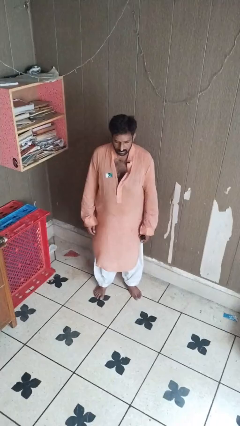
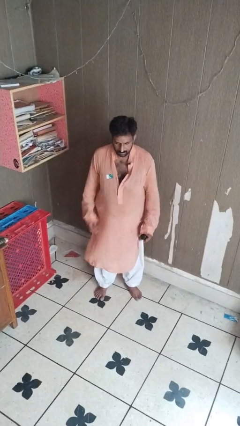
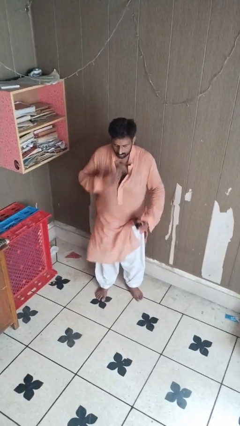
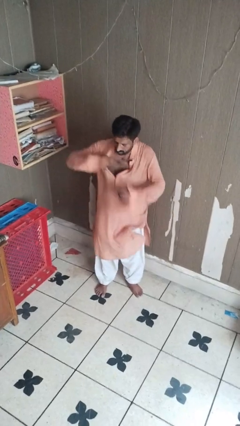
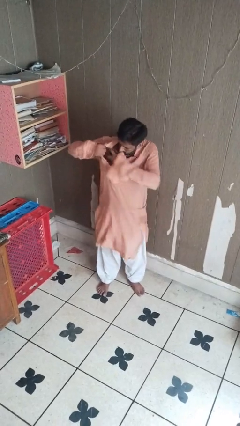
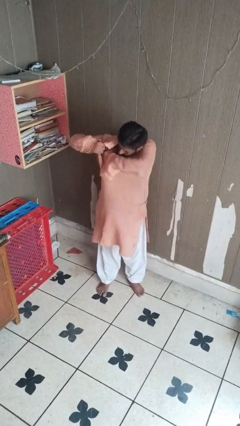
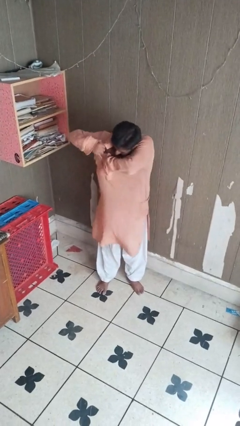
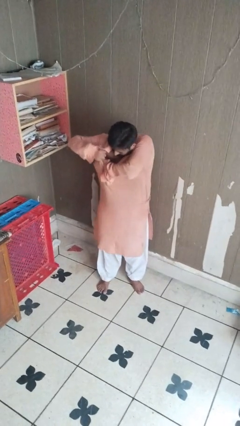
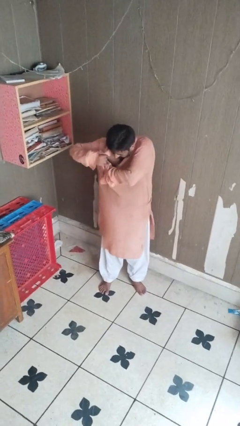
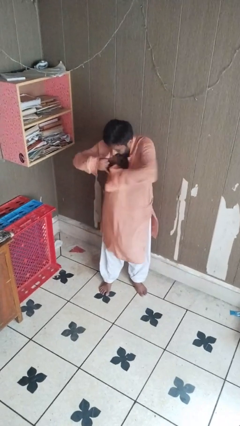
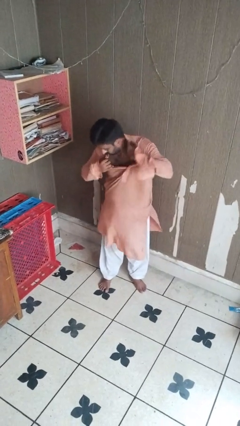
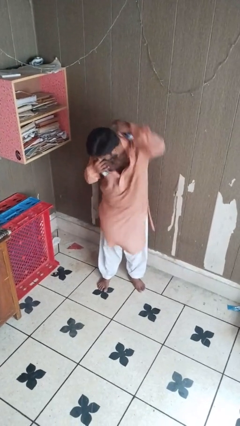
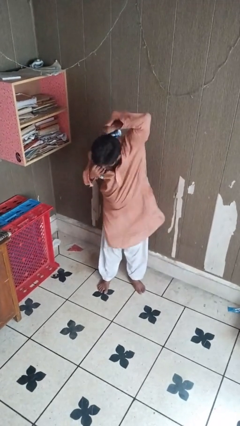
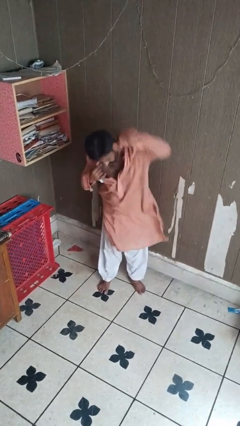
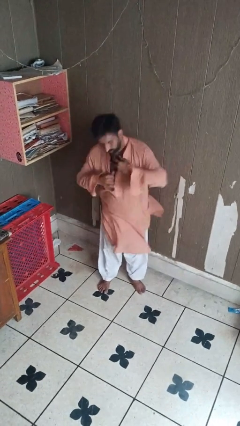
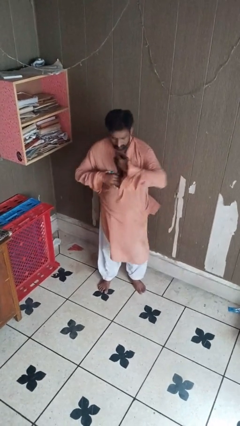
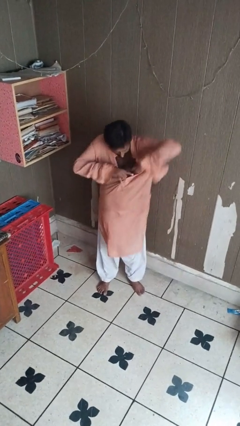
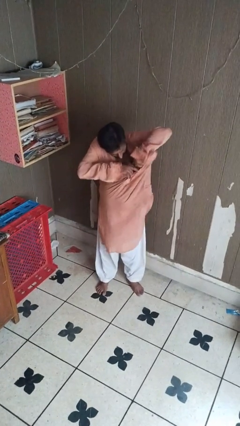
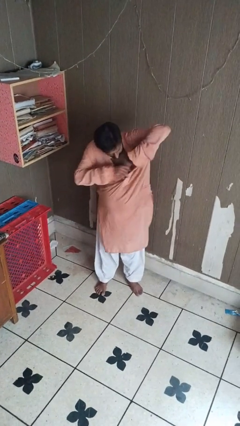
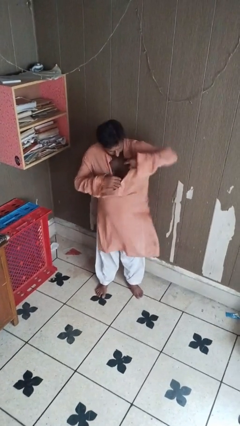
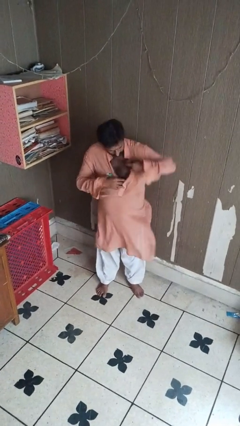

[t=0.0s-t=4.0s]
person applies deodorant

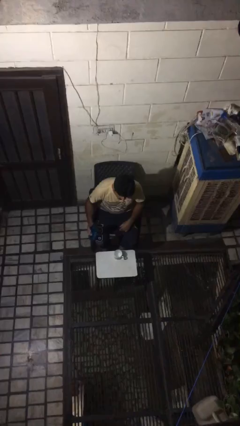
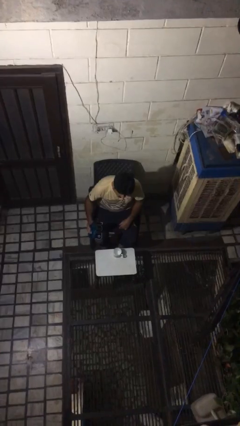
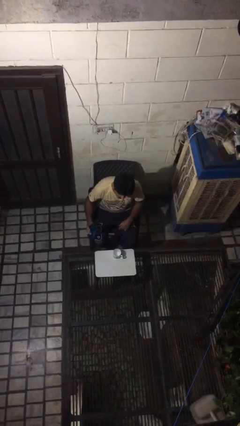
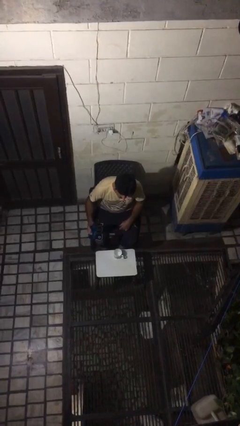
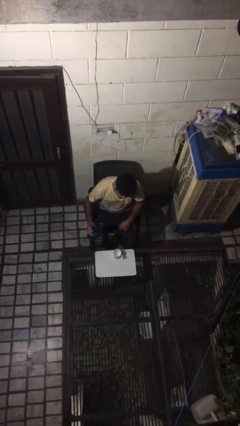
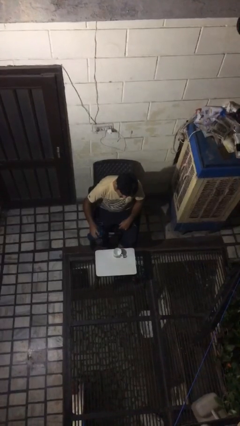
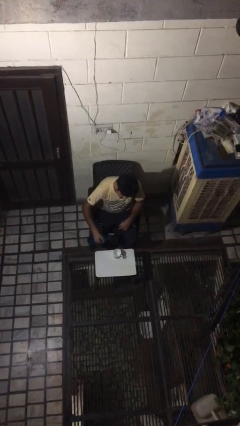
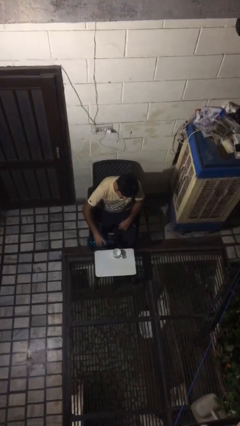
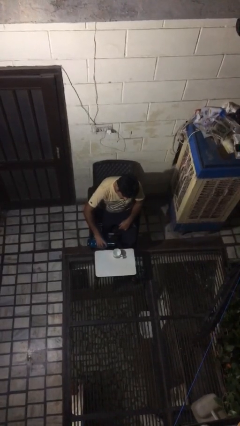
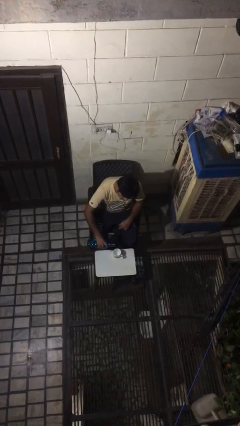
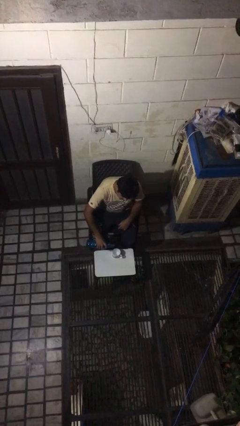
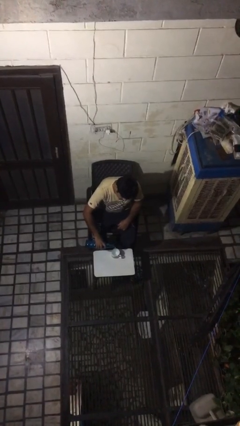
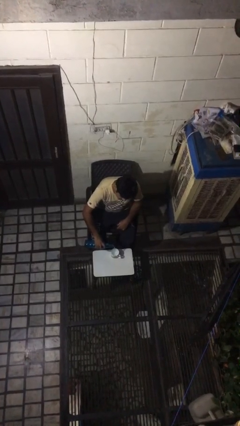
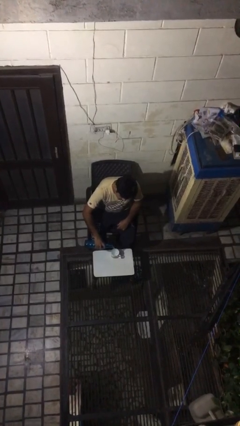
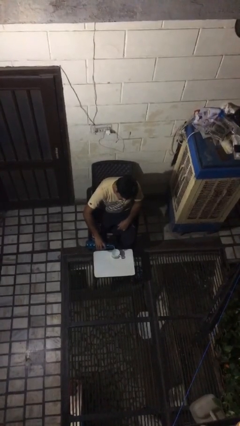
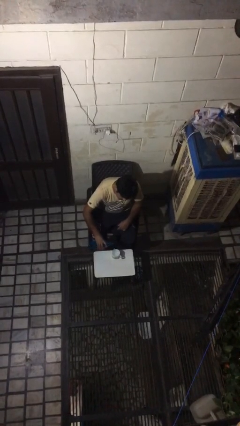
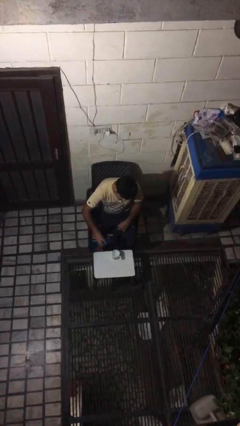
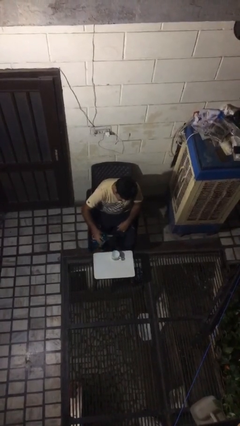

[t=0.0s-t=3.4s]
person pours liquid into cup

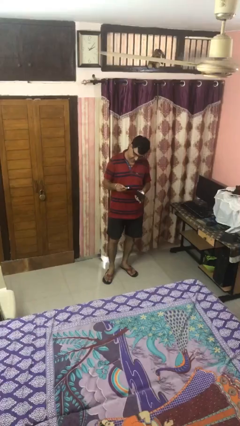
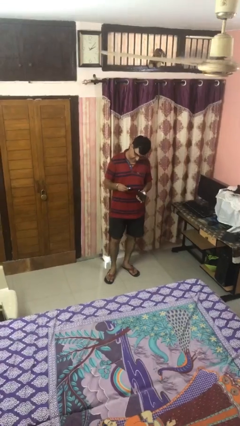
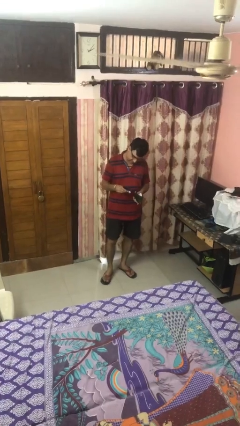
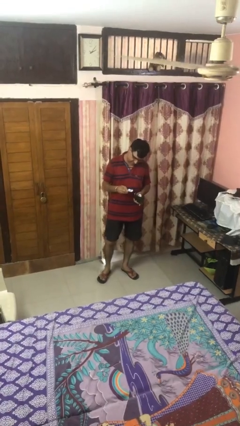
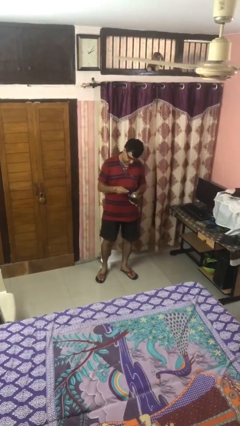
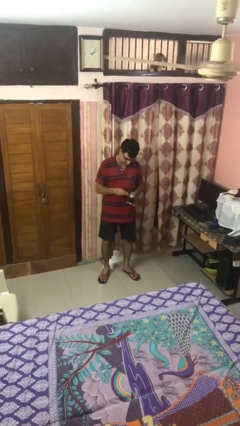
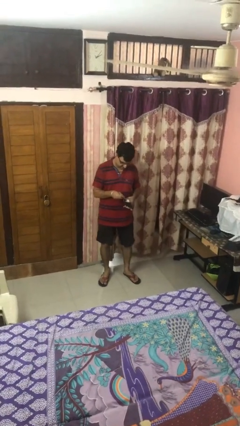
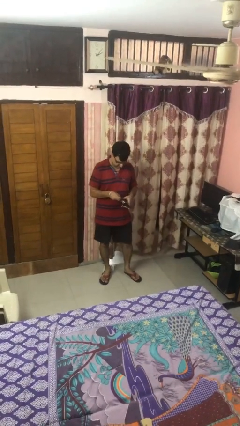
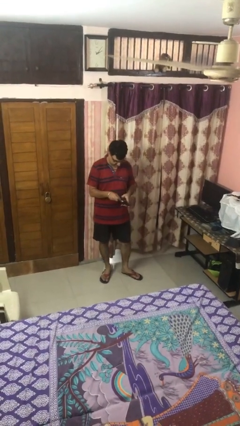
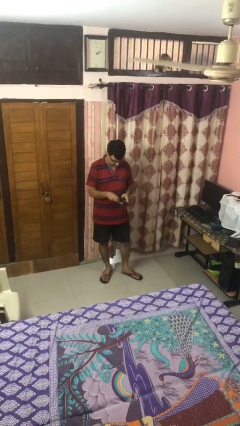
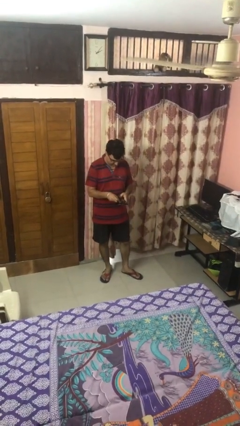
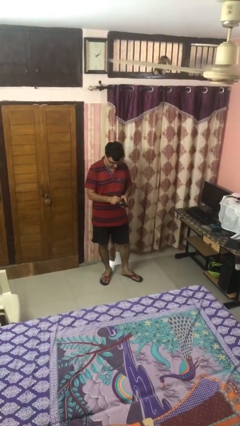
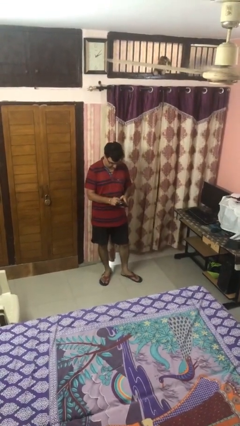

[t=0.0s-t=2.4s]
person puts object into purse

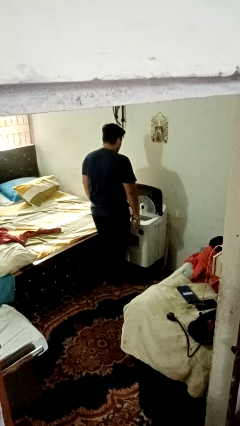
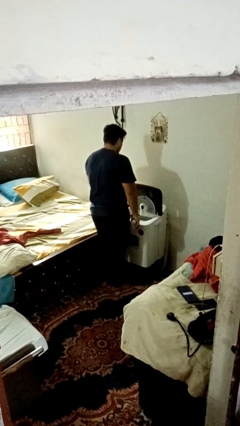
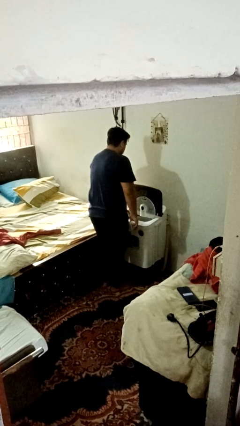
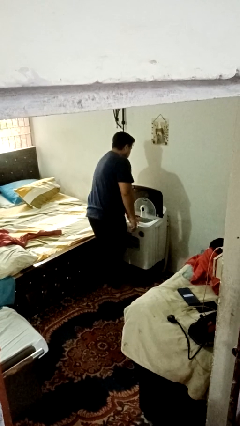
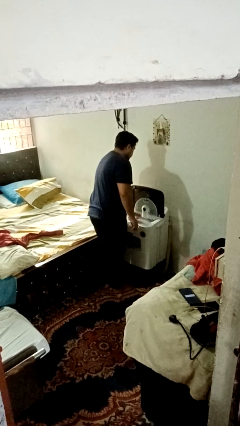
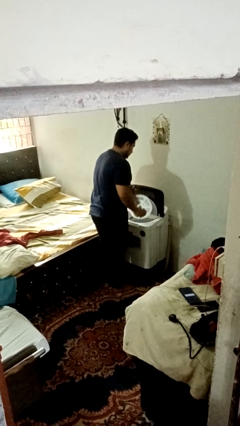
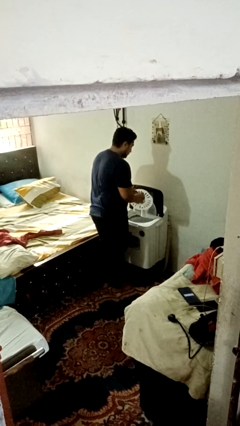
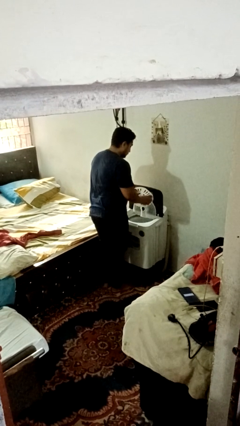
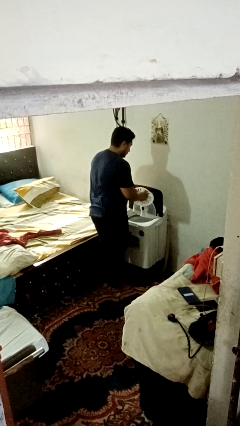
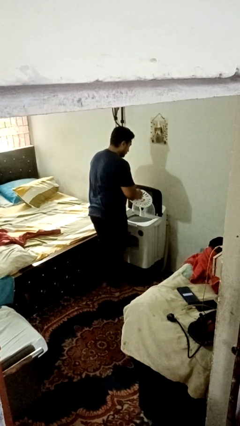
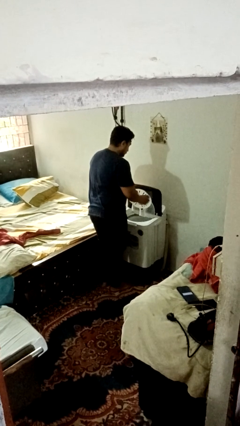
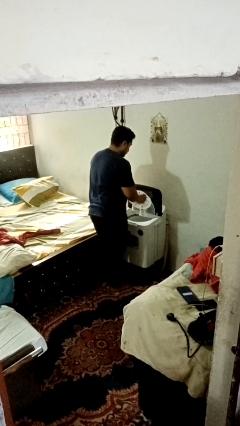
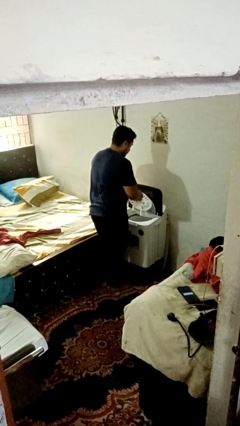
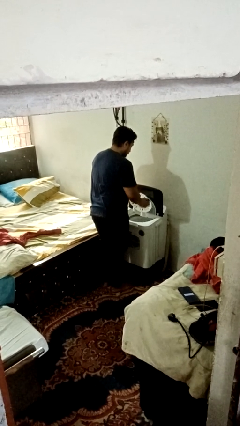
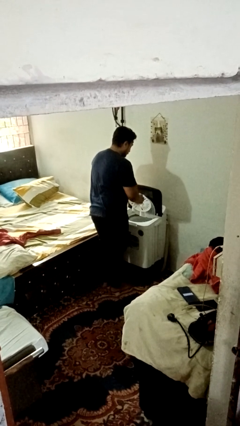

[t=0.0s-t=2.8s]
person cleans dryer lint trap

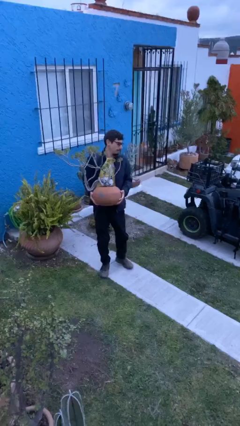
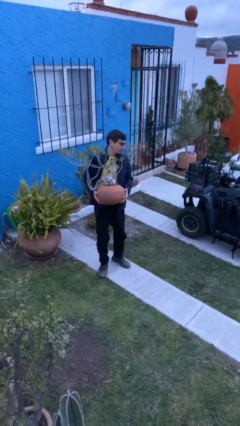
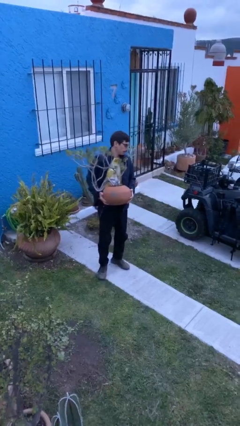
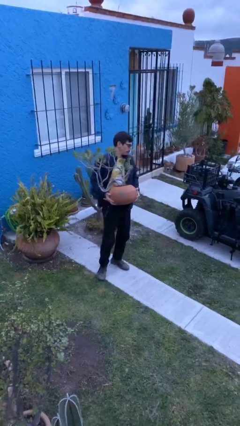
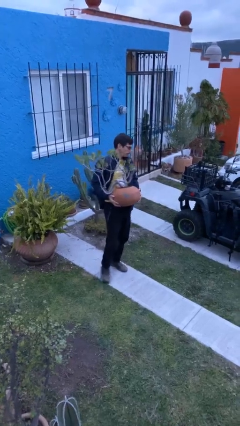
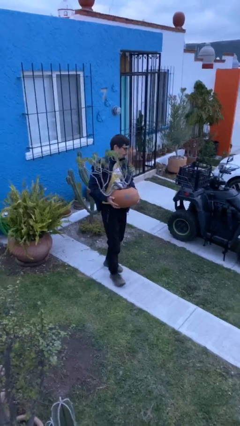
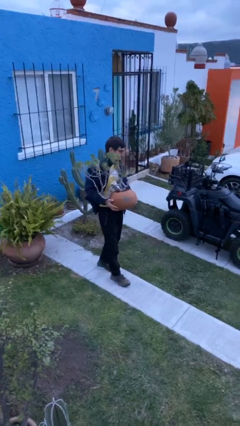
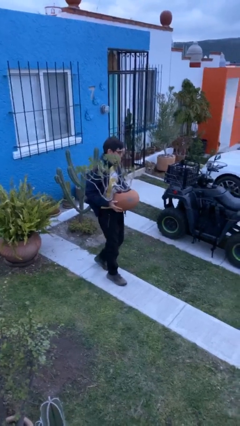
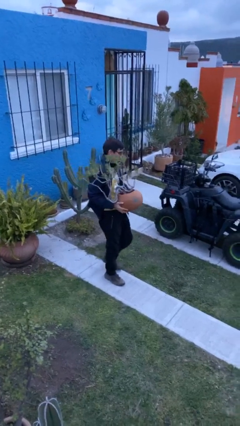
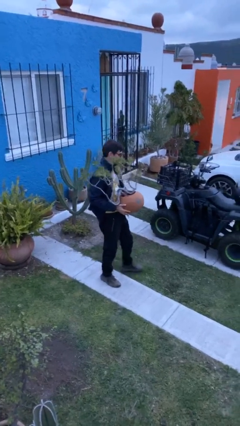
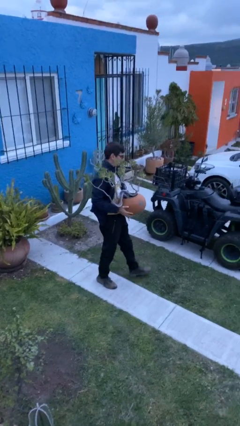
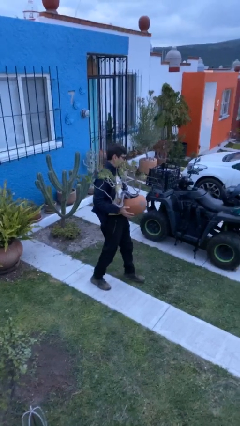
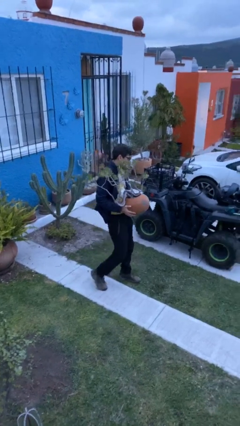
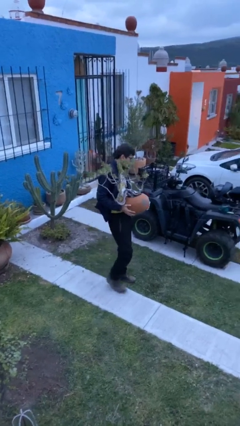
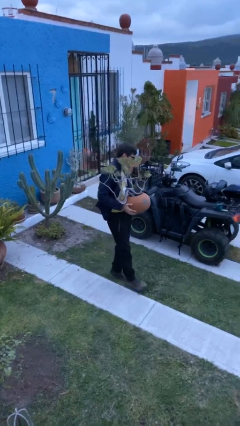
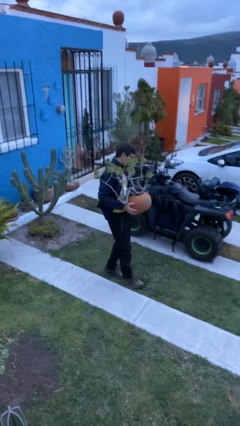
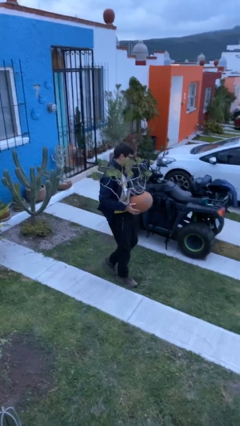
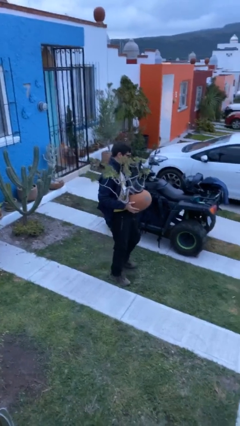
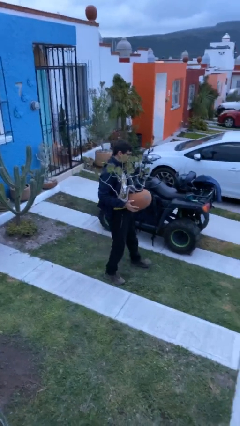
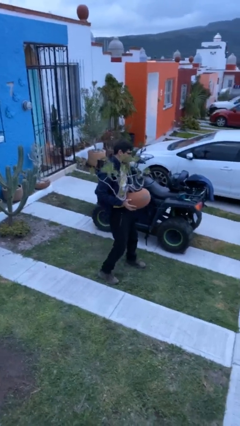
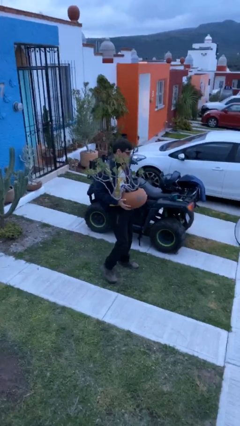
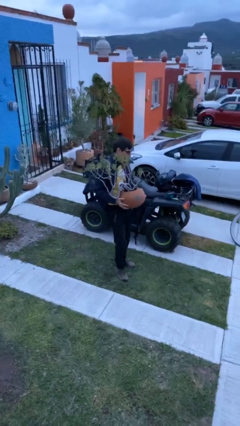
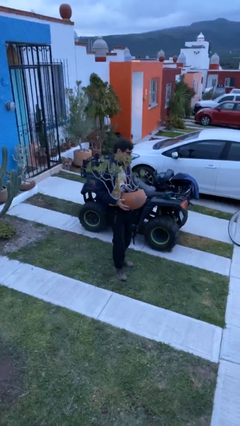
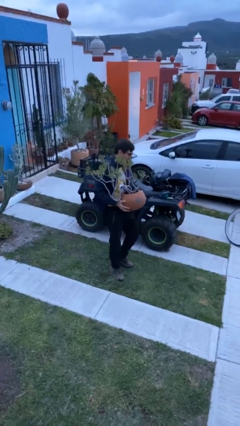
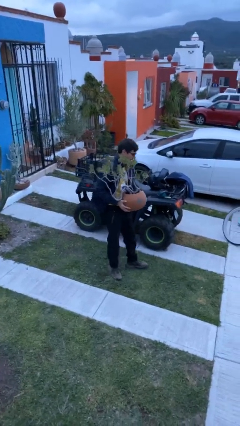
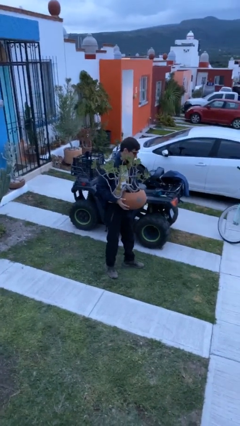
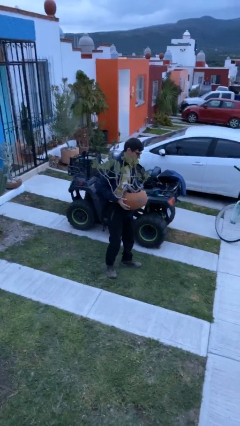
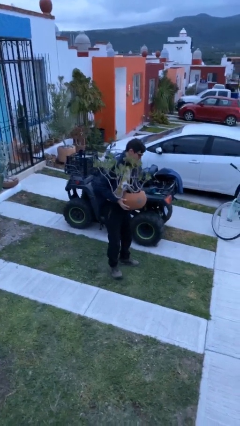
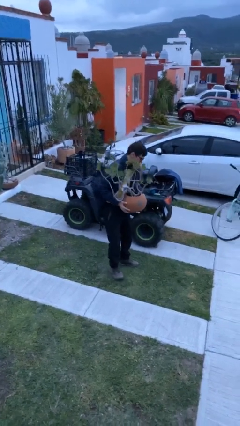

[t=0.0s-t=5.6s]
person carries heavy object
